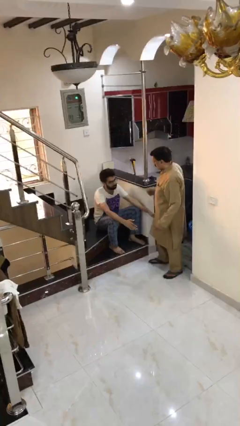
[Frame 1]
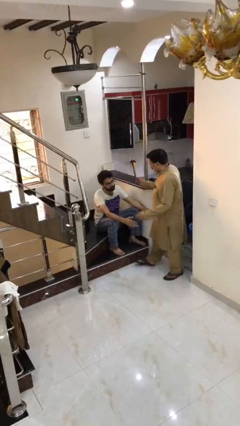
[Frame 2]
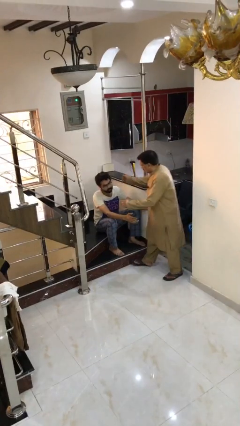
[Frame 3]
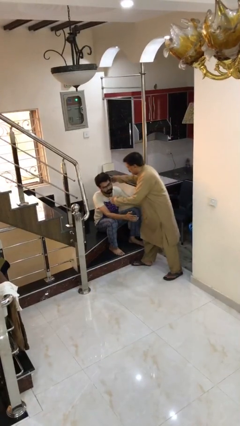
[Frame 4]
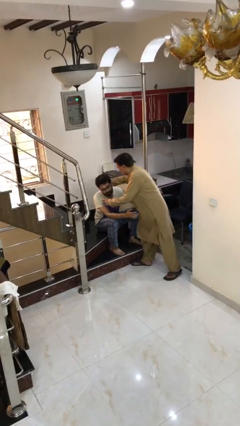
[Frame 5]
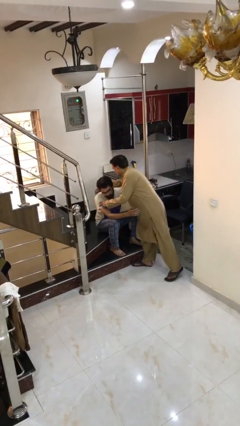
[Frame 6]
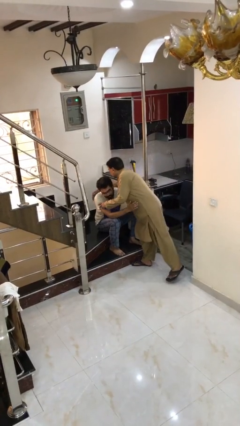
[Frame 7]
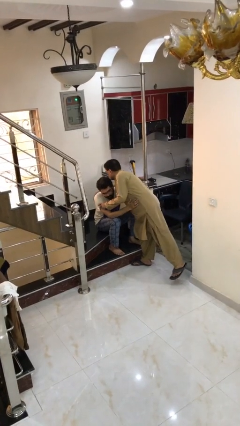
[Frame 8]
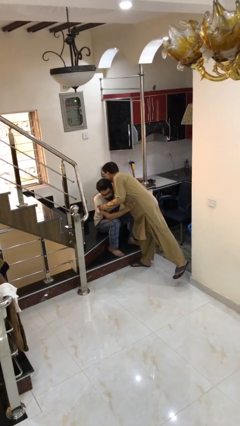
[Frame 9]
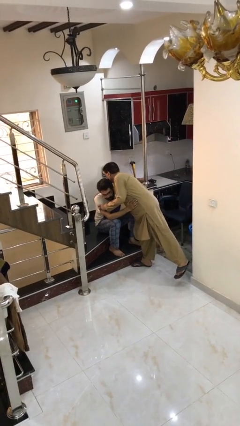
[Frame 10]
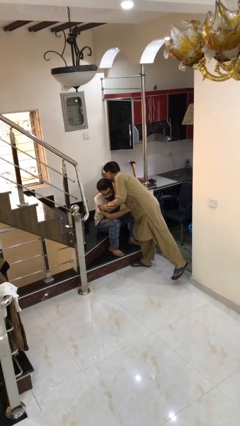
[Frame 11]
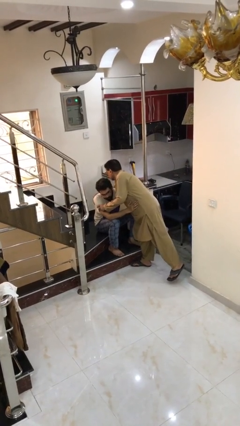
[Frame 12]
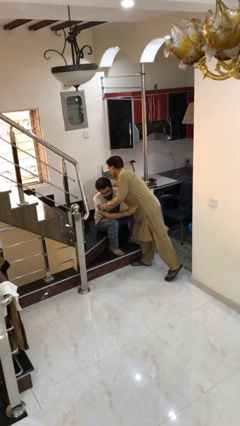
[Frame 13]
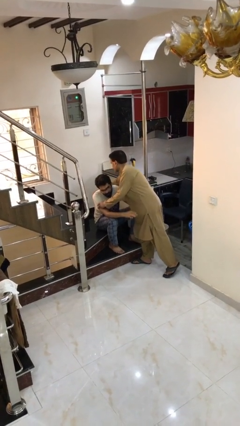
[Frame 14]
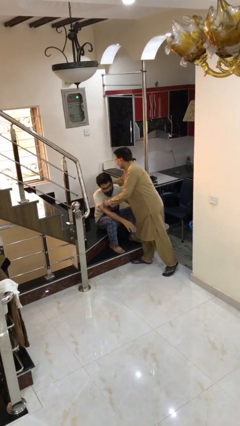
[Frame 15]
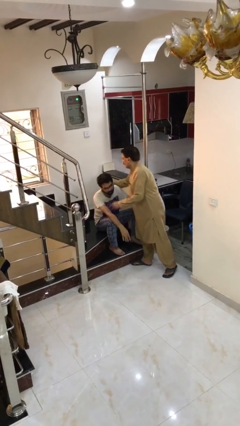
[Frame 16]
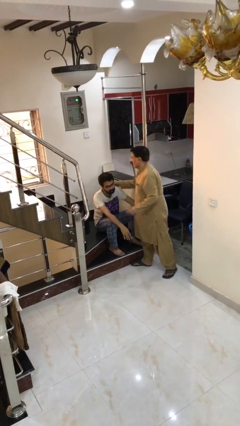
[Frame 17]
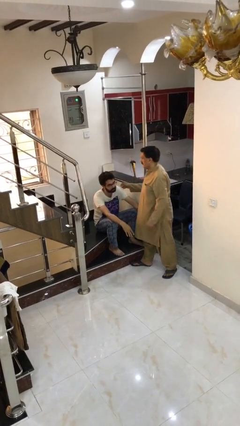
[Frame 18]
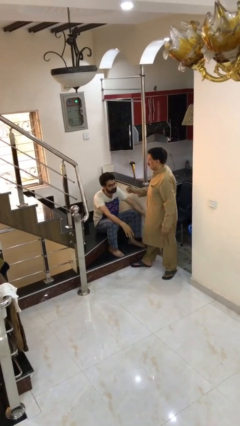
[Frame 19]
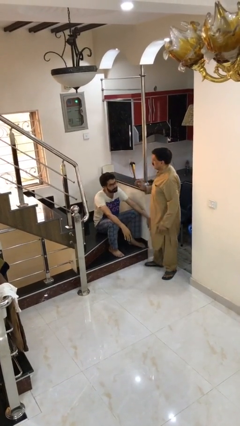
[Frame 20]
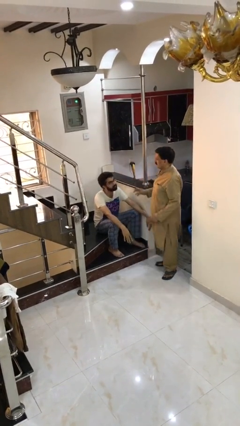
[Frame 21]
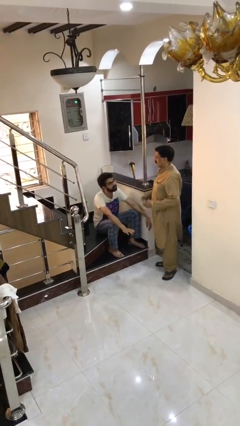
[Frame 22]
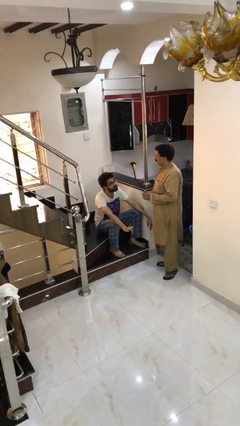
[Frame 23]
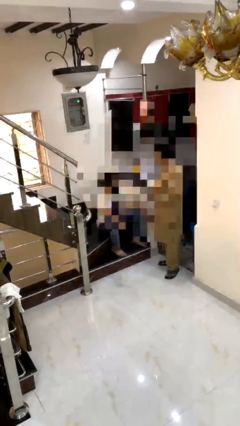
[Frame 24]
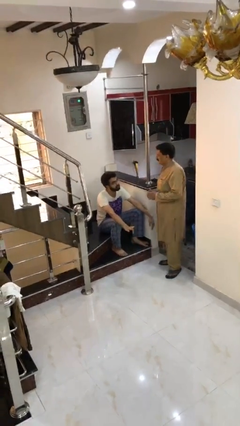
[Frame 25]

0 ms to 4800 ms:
person embraces person

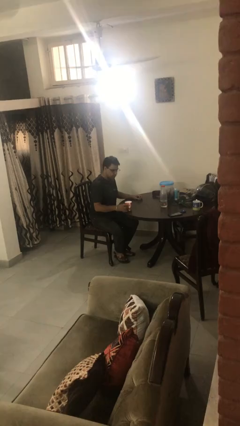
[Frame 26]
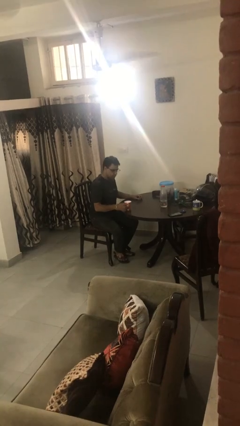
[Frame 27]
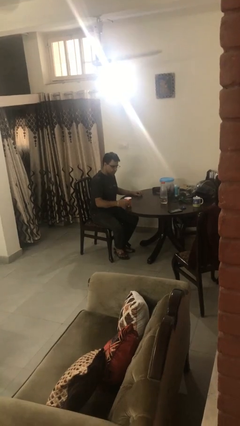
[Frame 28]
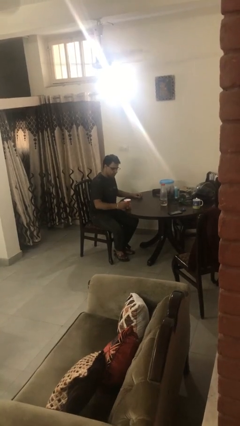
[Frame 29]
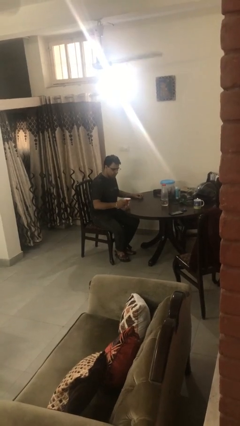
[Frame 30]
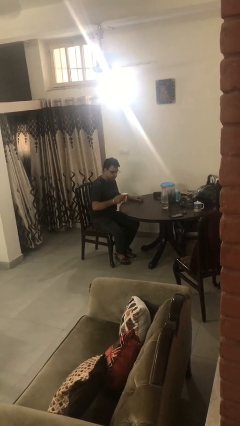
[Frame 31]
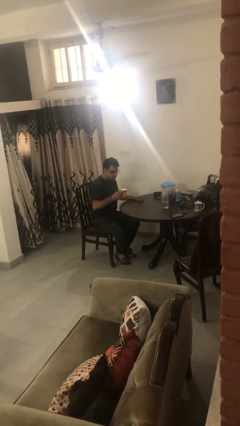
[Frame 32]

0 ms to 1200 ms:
person picks up object from table

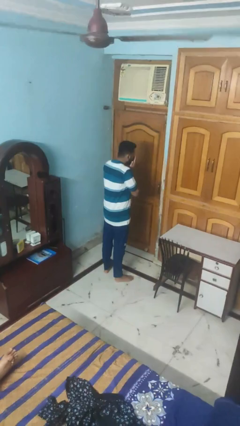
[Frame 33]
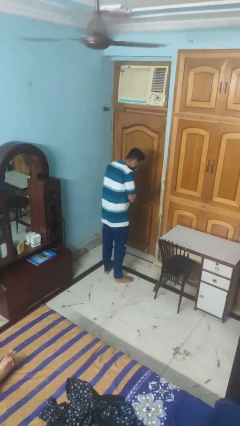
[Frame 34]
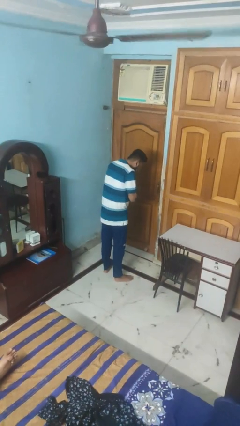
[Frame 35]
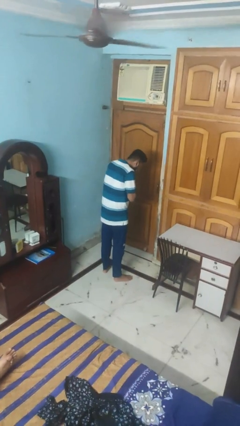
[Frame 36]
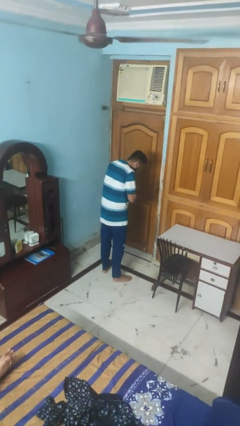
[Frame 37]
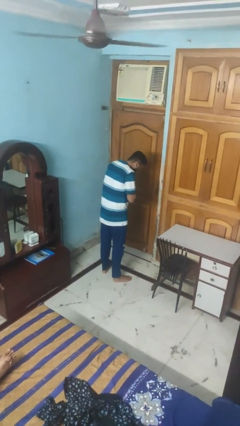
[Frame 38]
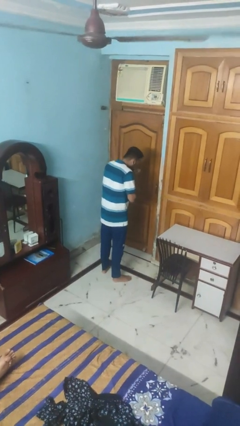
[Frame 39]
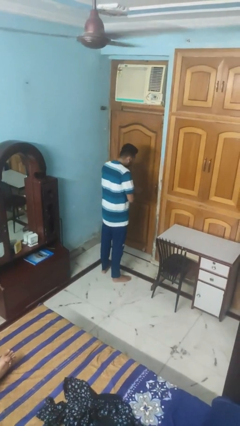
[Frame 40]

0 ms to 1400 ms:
person sneezes into hand

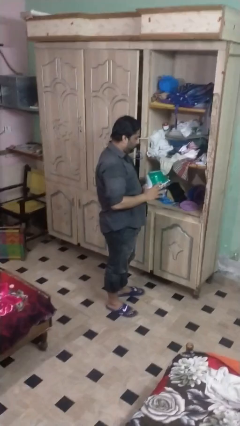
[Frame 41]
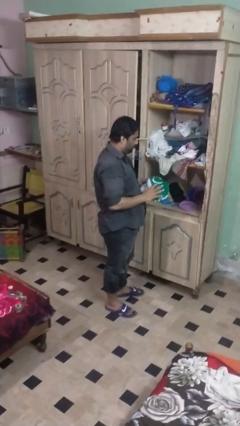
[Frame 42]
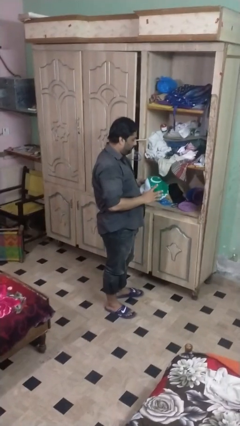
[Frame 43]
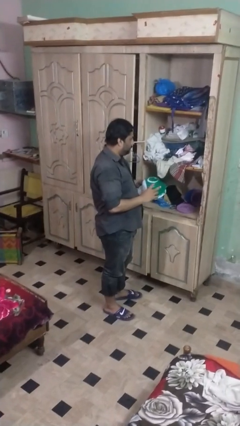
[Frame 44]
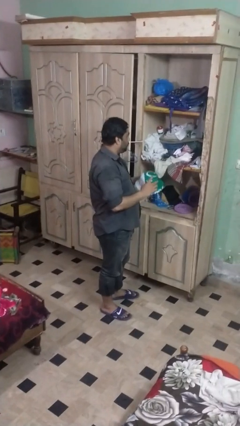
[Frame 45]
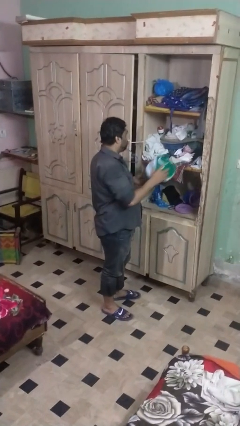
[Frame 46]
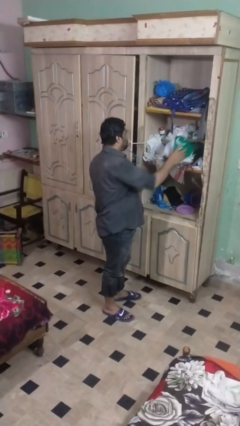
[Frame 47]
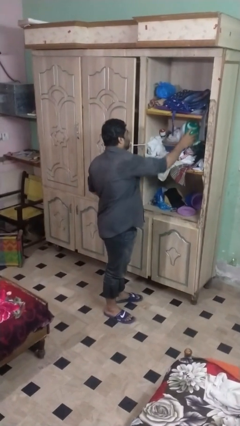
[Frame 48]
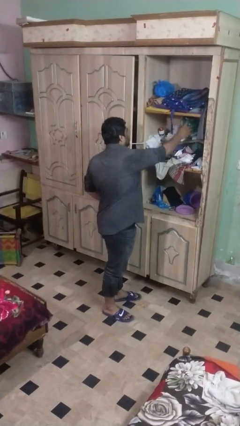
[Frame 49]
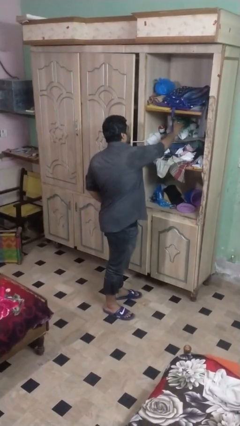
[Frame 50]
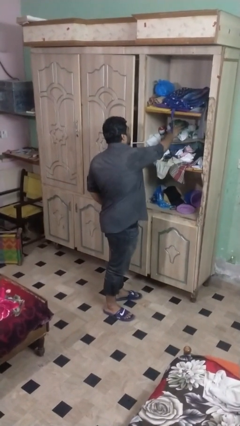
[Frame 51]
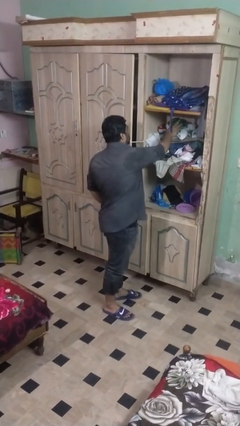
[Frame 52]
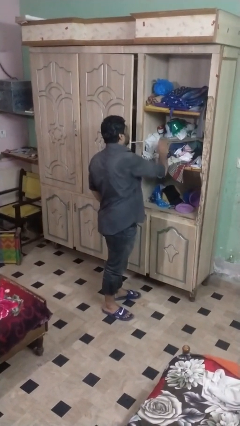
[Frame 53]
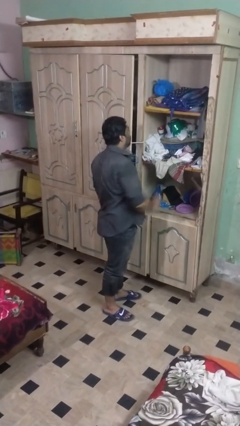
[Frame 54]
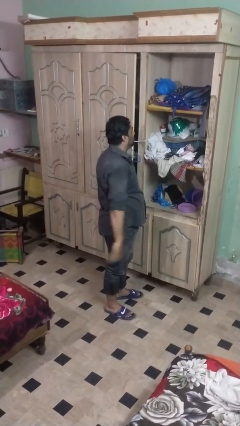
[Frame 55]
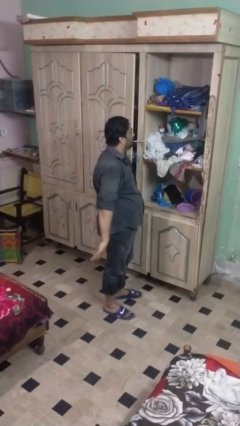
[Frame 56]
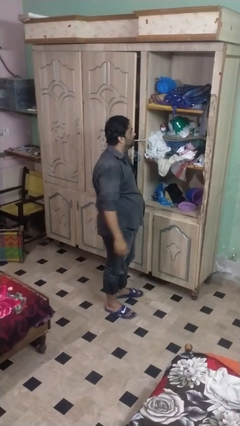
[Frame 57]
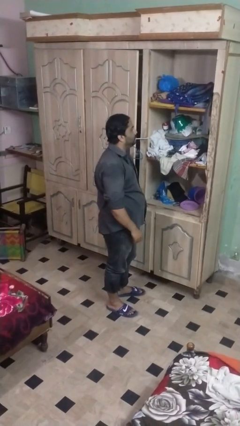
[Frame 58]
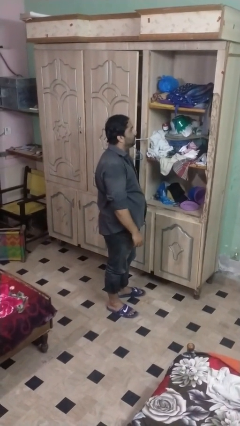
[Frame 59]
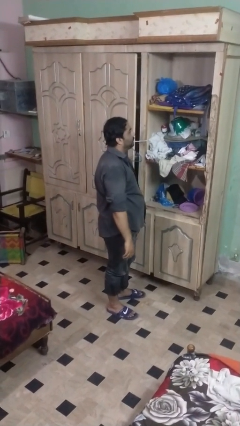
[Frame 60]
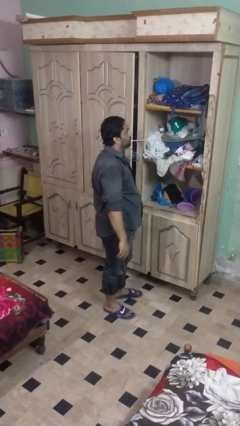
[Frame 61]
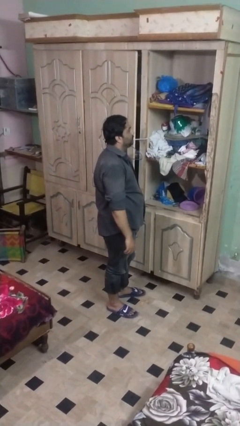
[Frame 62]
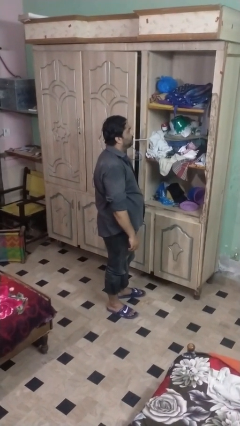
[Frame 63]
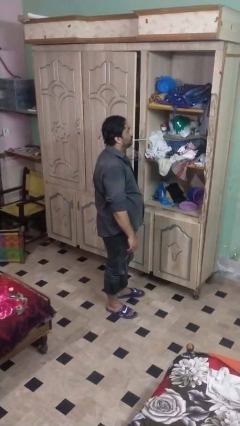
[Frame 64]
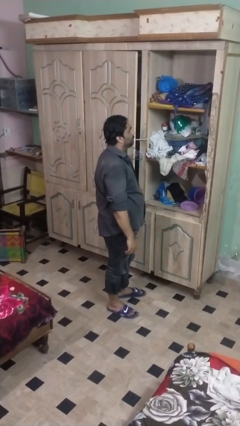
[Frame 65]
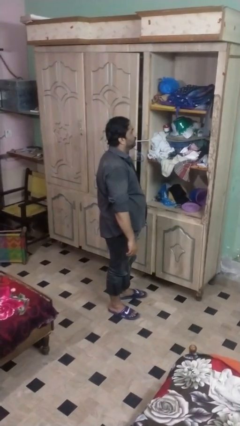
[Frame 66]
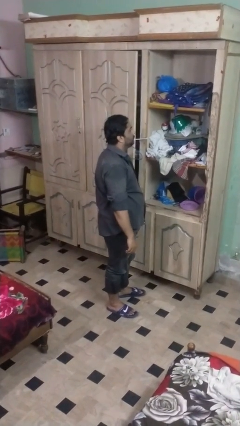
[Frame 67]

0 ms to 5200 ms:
person puts down object on shelf

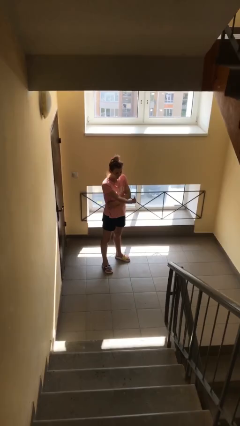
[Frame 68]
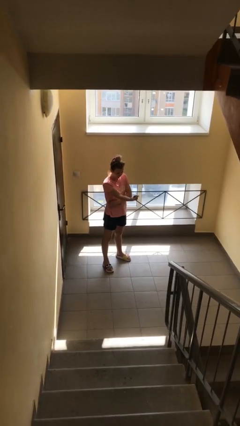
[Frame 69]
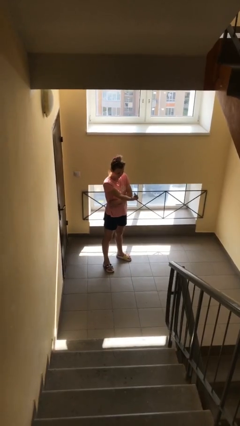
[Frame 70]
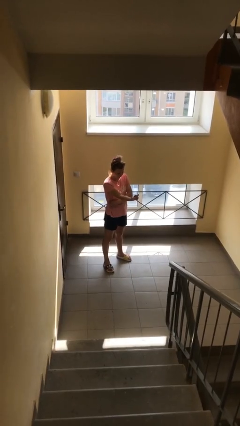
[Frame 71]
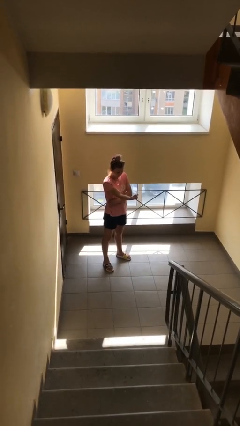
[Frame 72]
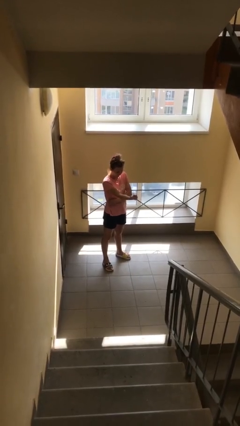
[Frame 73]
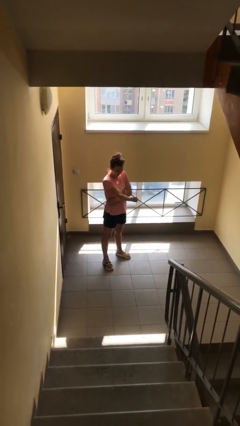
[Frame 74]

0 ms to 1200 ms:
person gestures come here

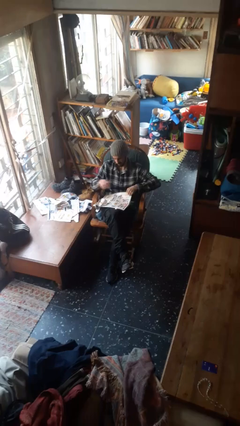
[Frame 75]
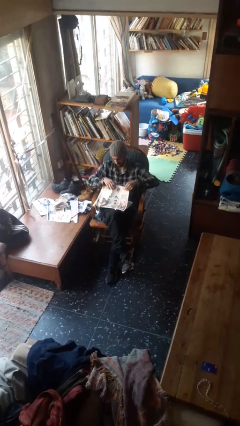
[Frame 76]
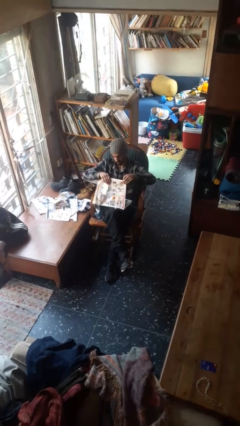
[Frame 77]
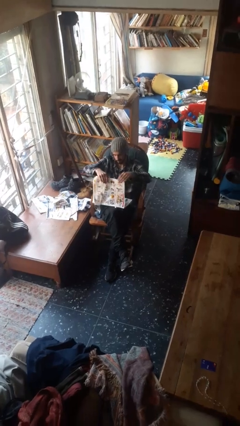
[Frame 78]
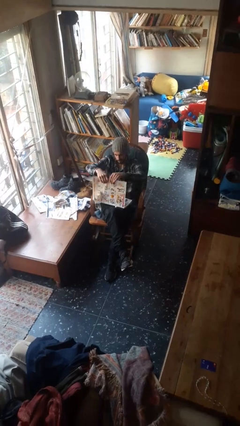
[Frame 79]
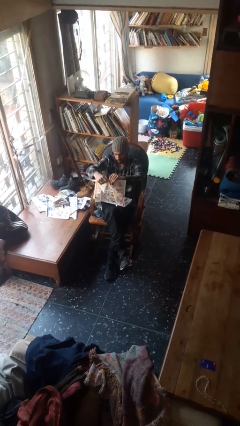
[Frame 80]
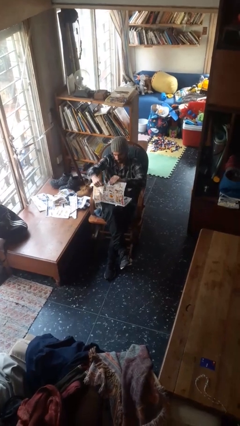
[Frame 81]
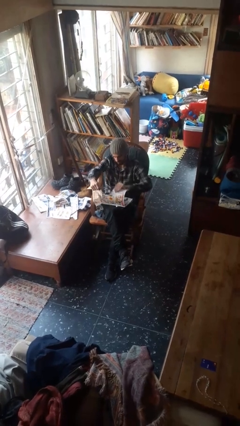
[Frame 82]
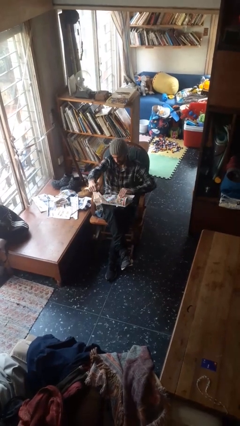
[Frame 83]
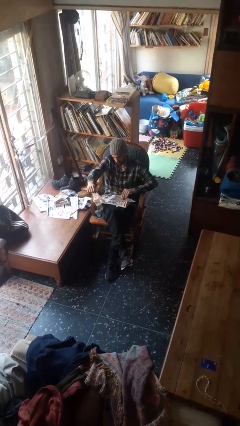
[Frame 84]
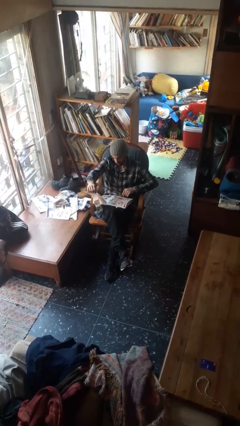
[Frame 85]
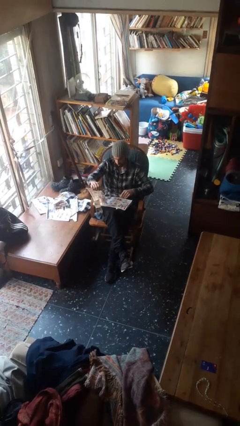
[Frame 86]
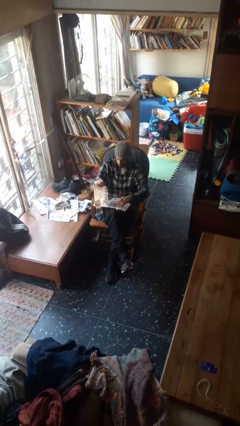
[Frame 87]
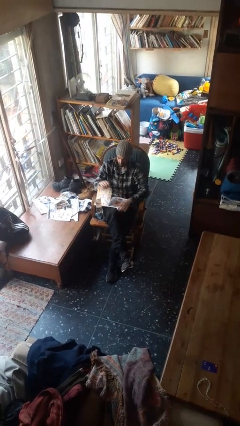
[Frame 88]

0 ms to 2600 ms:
person tears paper

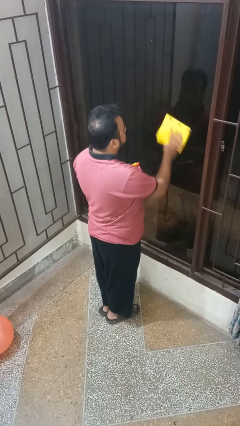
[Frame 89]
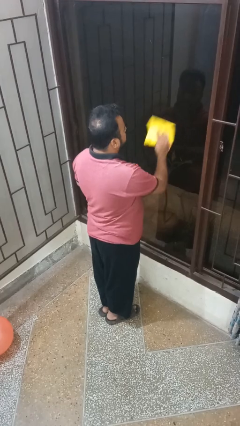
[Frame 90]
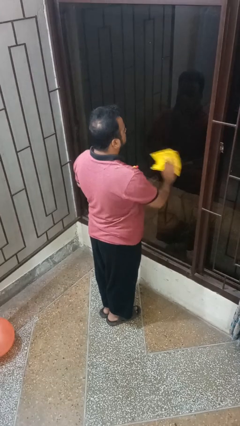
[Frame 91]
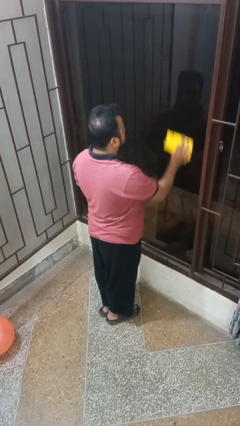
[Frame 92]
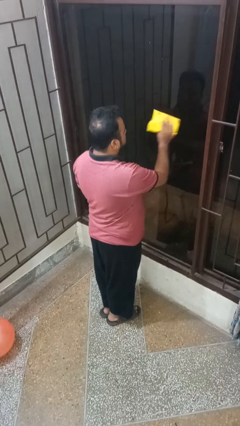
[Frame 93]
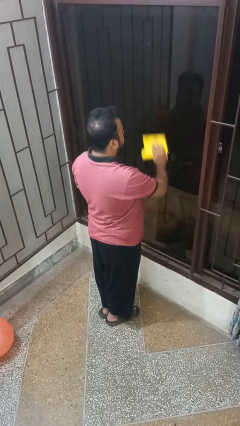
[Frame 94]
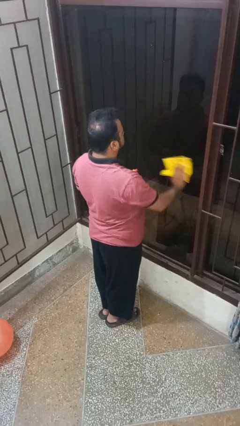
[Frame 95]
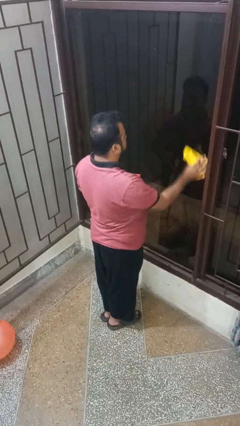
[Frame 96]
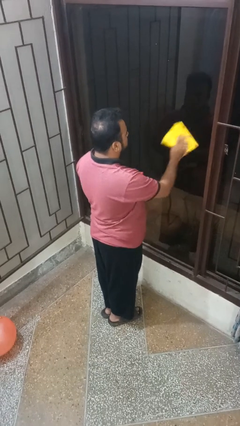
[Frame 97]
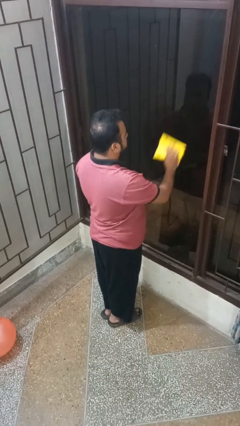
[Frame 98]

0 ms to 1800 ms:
person washes window
